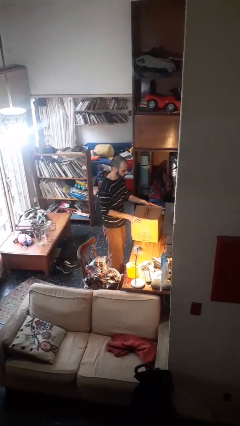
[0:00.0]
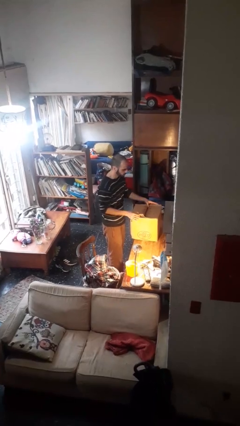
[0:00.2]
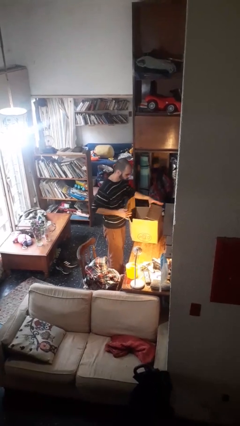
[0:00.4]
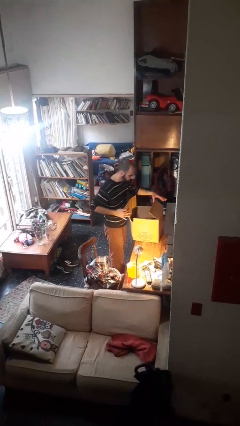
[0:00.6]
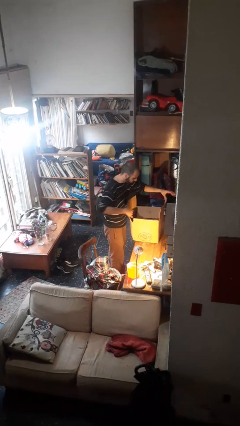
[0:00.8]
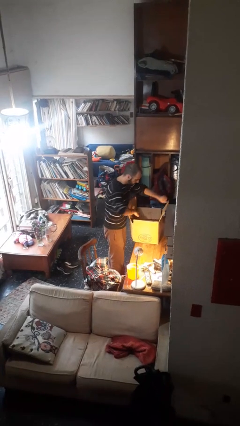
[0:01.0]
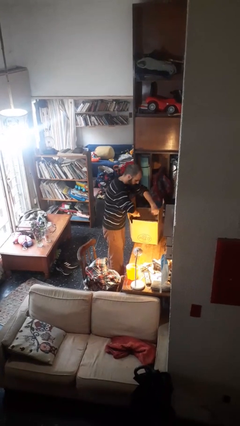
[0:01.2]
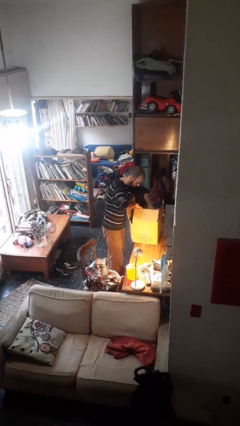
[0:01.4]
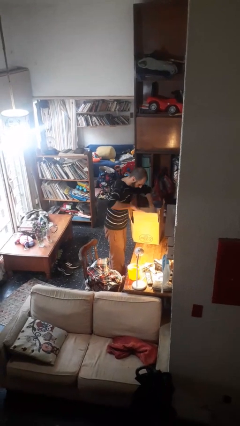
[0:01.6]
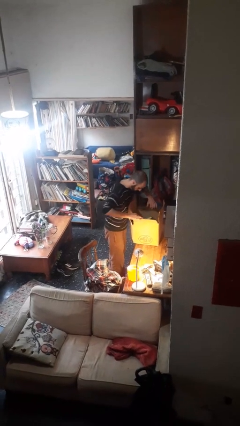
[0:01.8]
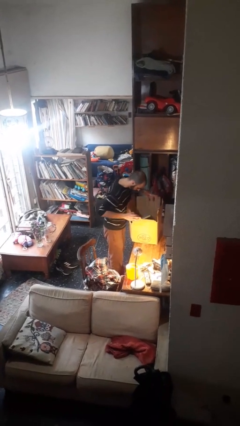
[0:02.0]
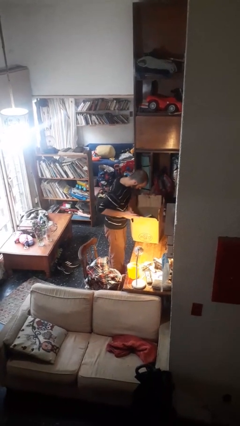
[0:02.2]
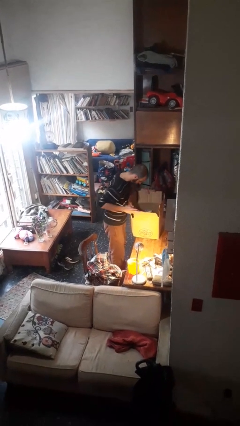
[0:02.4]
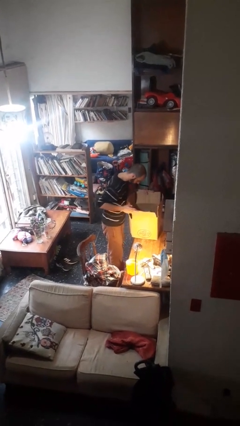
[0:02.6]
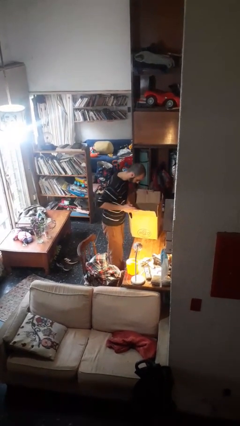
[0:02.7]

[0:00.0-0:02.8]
person opens box

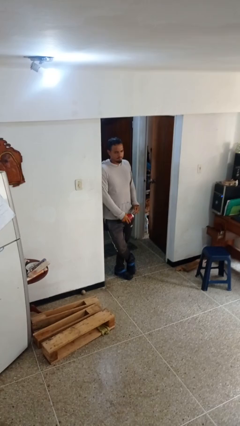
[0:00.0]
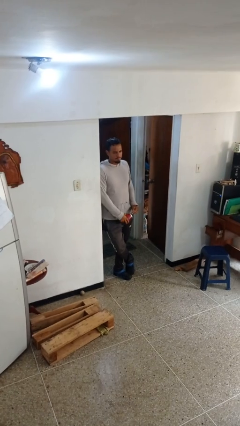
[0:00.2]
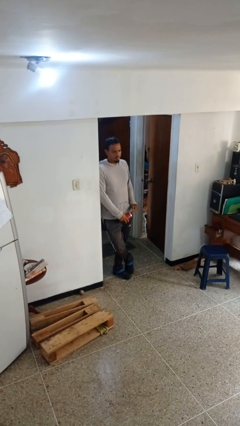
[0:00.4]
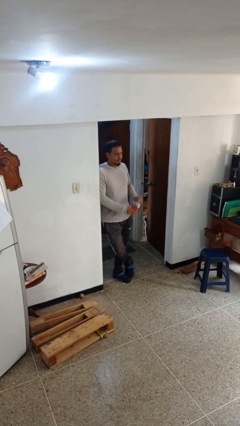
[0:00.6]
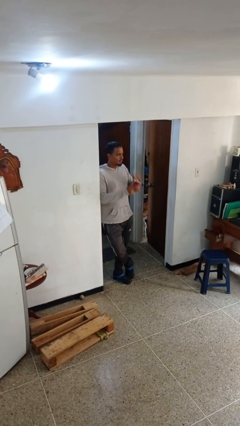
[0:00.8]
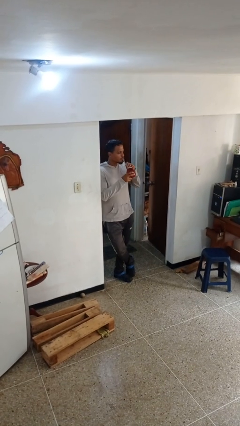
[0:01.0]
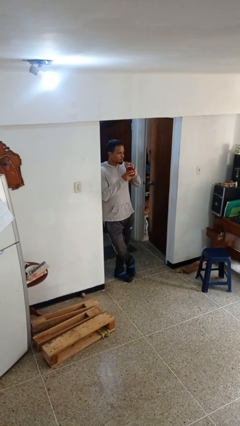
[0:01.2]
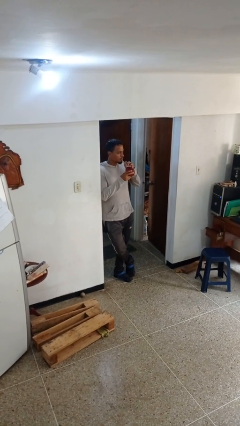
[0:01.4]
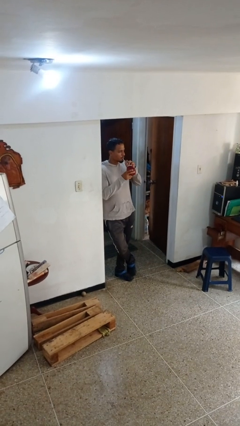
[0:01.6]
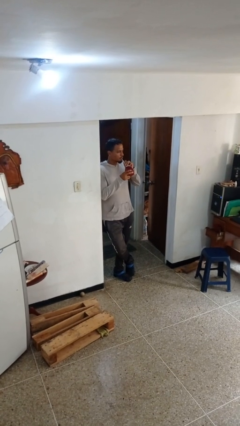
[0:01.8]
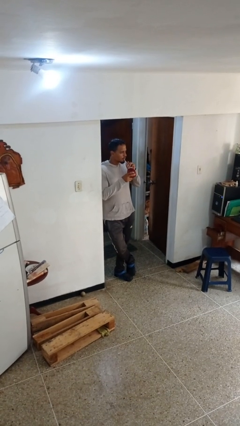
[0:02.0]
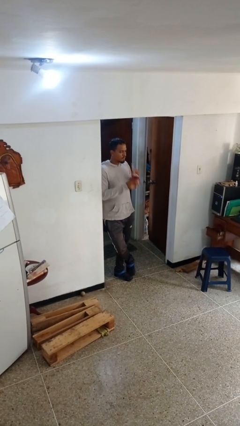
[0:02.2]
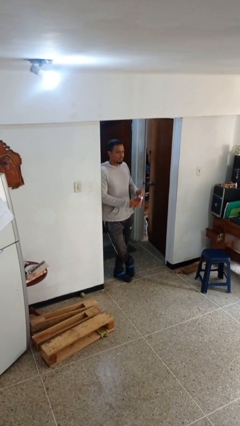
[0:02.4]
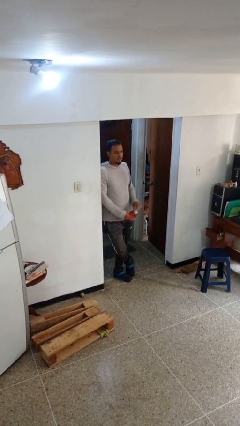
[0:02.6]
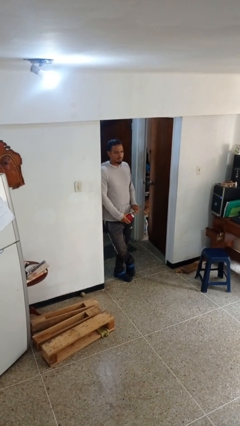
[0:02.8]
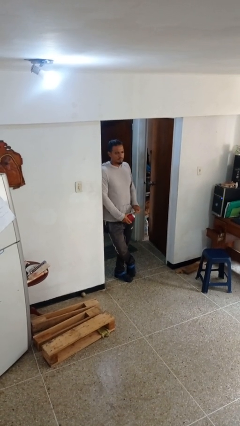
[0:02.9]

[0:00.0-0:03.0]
person drinks from straw

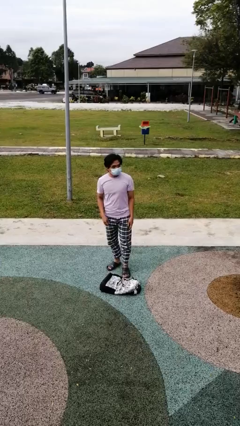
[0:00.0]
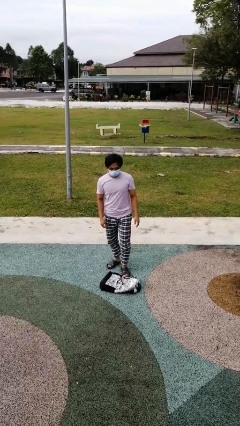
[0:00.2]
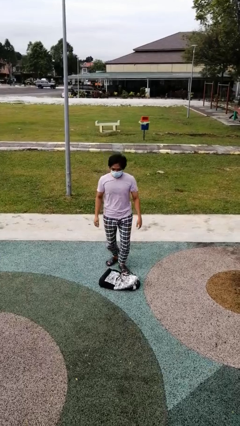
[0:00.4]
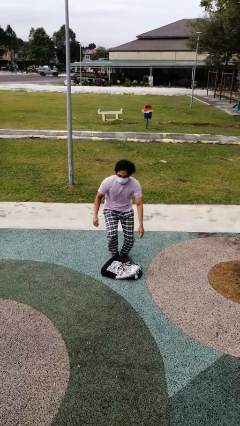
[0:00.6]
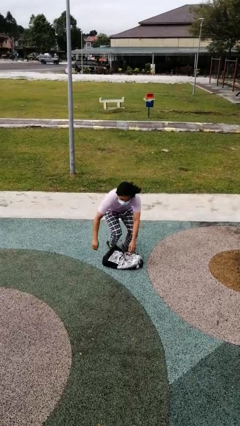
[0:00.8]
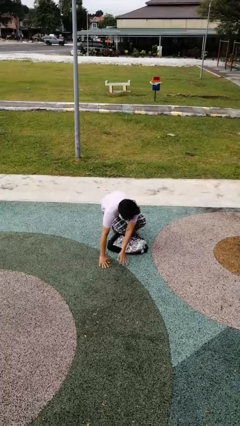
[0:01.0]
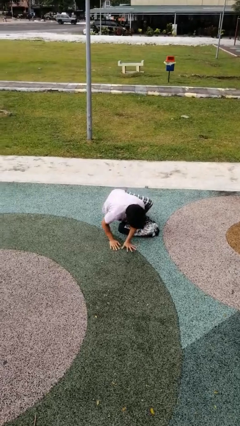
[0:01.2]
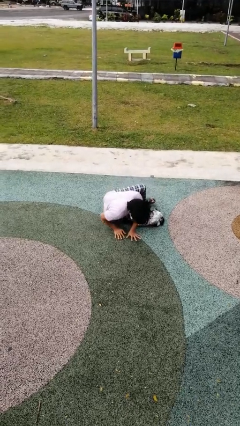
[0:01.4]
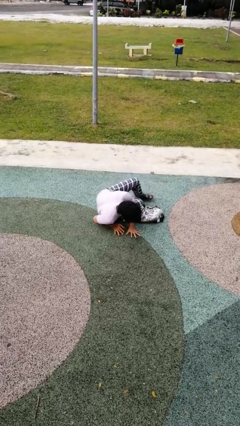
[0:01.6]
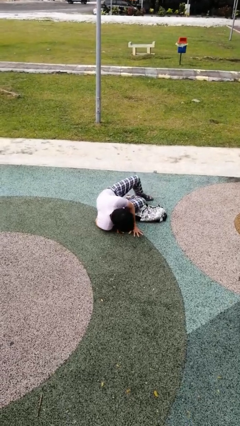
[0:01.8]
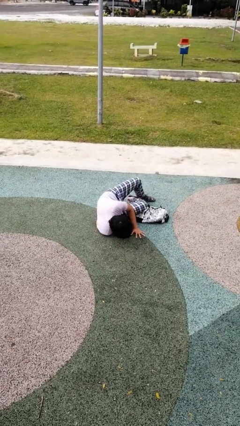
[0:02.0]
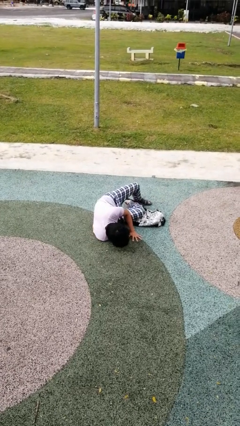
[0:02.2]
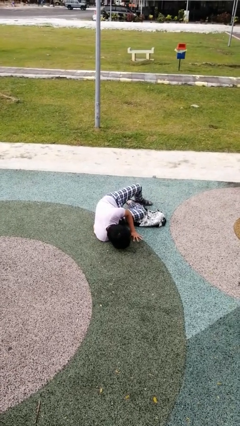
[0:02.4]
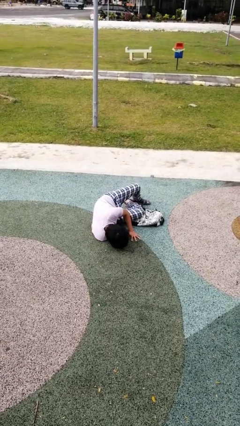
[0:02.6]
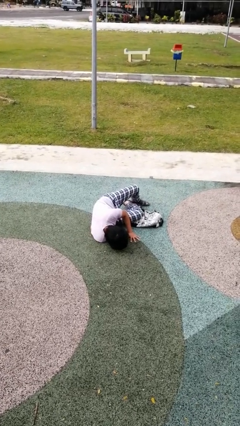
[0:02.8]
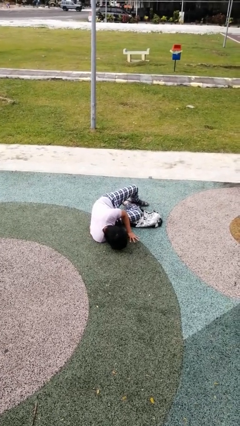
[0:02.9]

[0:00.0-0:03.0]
person trips on object on floor

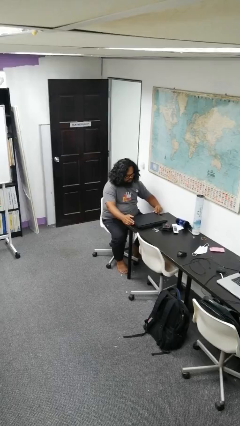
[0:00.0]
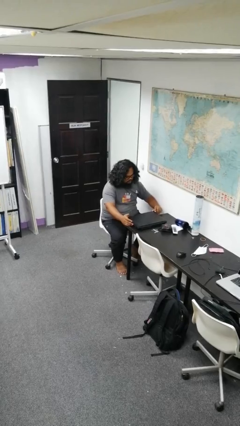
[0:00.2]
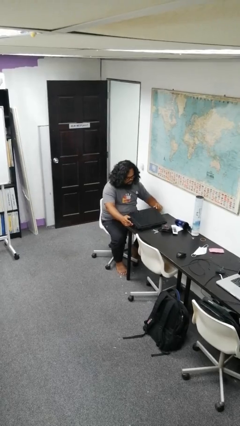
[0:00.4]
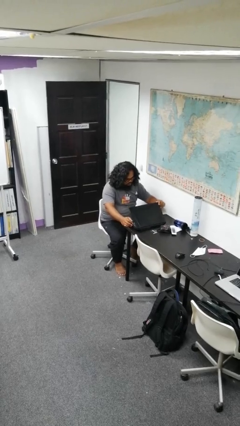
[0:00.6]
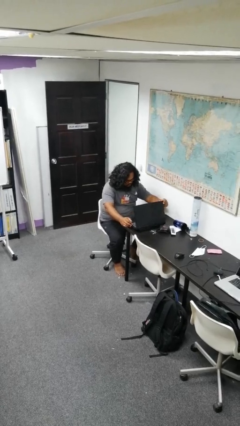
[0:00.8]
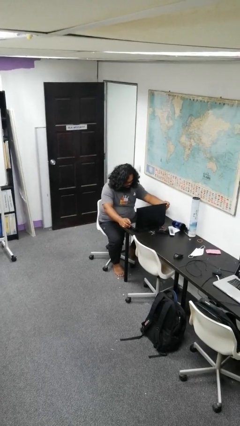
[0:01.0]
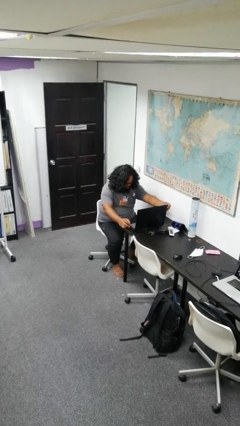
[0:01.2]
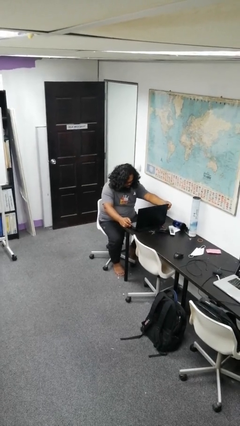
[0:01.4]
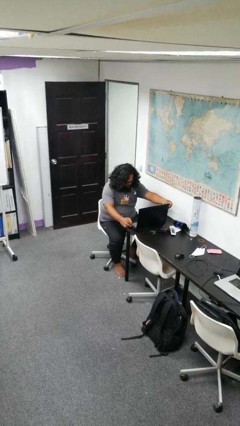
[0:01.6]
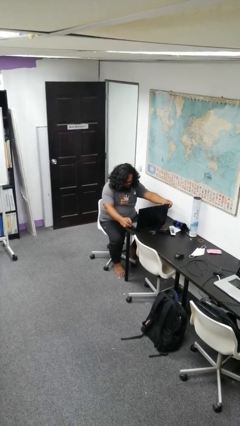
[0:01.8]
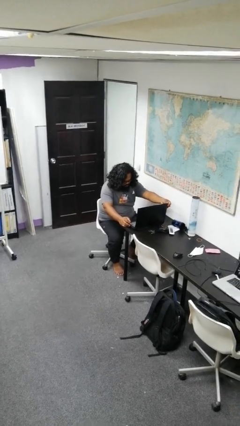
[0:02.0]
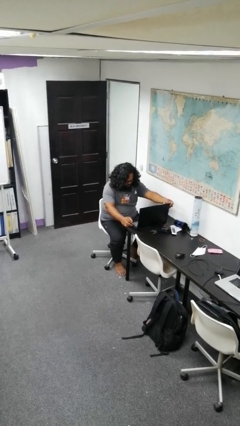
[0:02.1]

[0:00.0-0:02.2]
person opens laptop

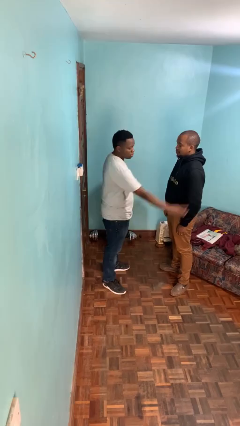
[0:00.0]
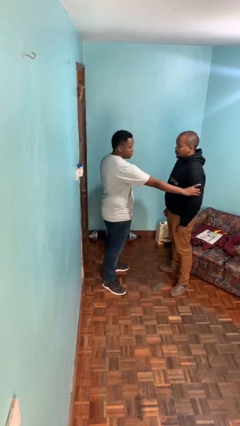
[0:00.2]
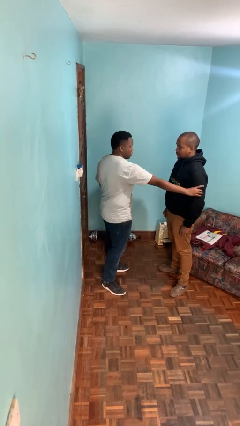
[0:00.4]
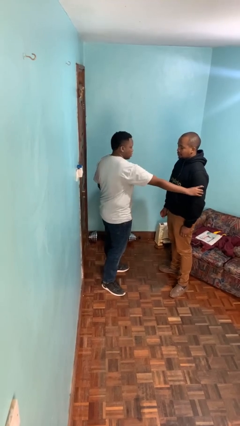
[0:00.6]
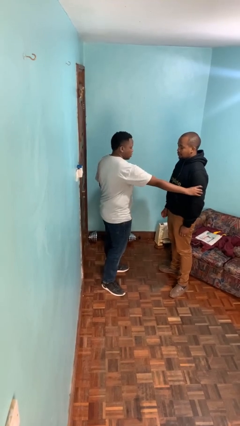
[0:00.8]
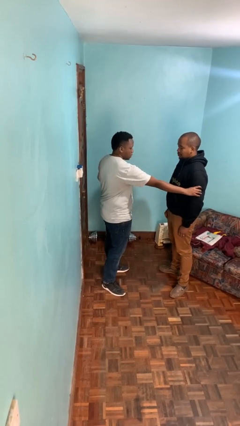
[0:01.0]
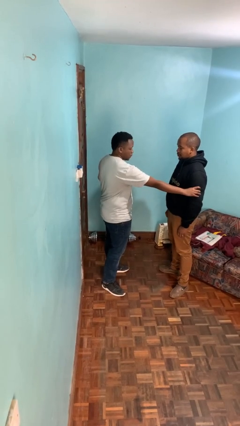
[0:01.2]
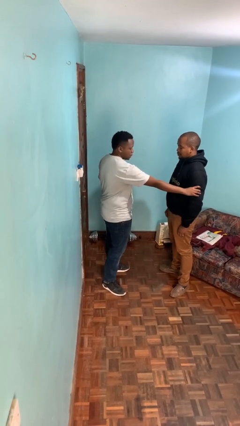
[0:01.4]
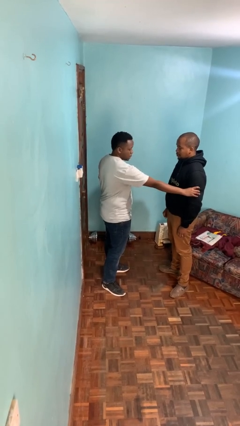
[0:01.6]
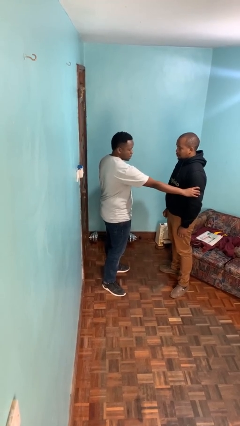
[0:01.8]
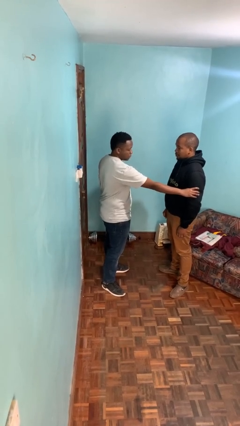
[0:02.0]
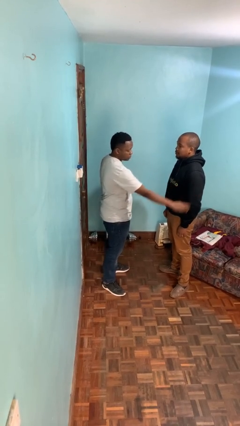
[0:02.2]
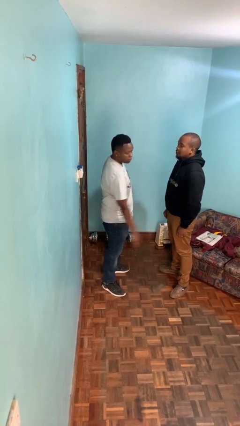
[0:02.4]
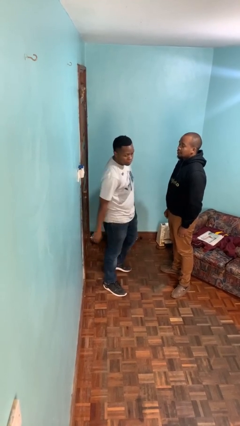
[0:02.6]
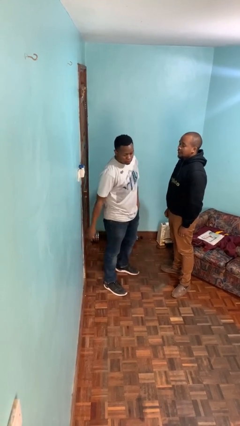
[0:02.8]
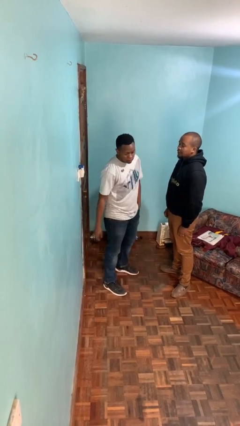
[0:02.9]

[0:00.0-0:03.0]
person grabs person by bicep

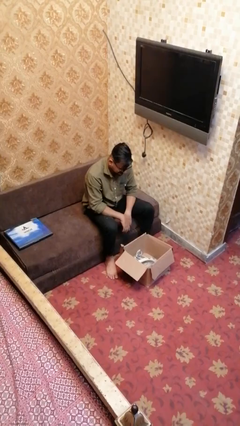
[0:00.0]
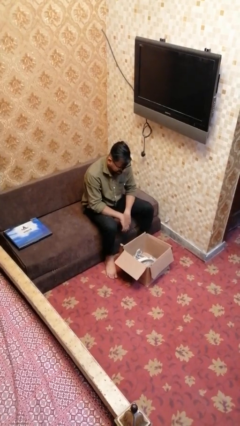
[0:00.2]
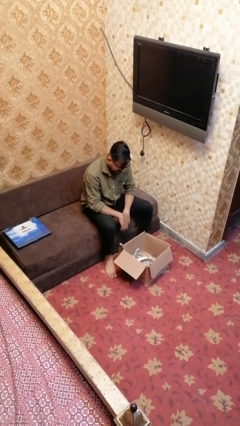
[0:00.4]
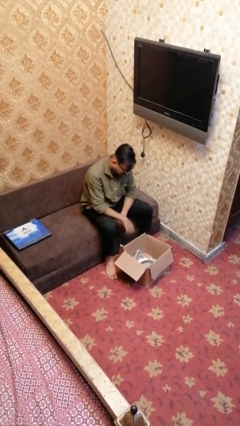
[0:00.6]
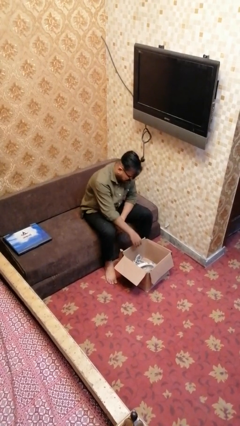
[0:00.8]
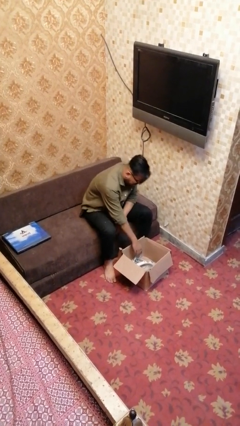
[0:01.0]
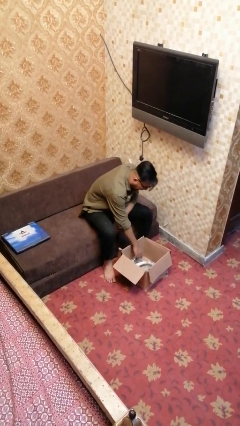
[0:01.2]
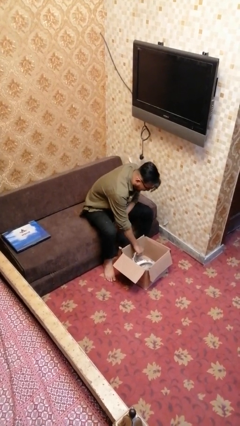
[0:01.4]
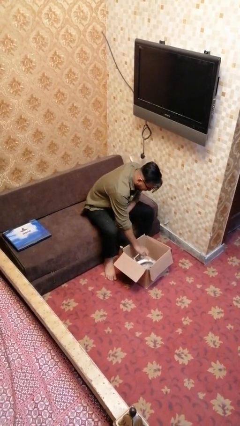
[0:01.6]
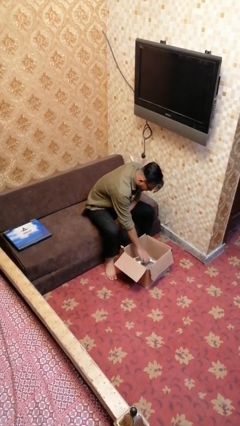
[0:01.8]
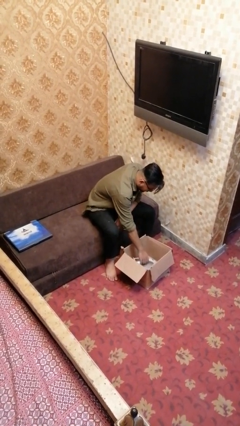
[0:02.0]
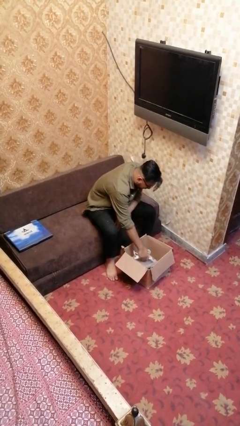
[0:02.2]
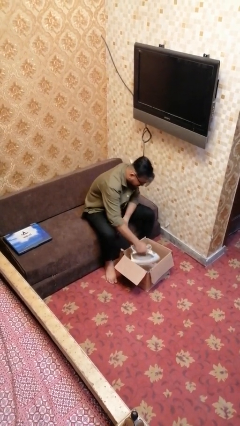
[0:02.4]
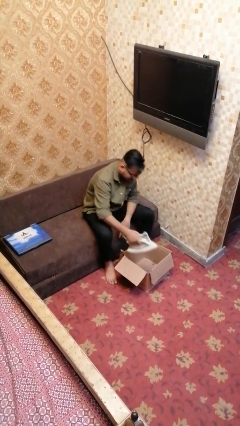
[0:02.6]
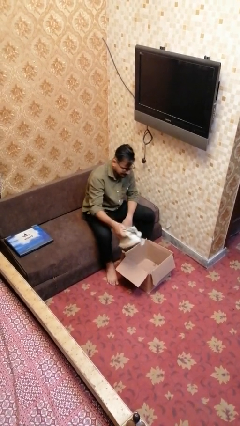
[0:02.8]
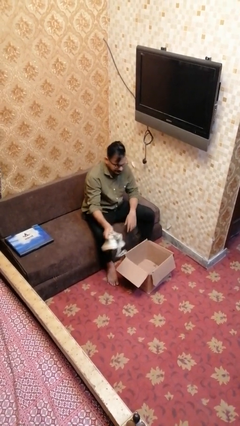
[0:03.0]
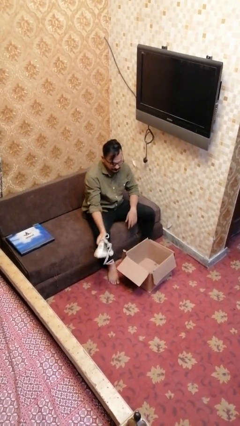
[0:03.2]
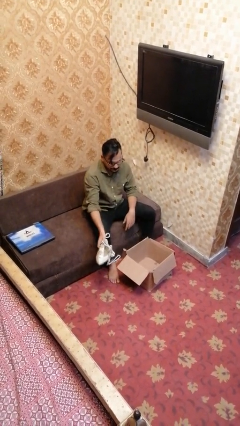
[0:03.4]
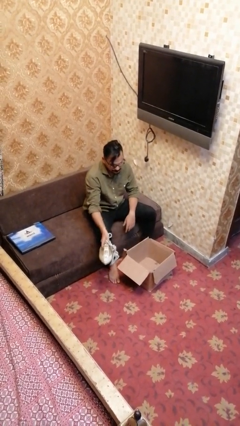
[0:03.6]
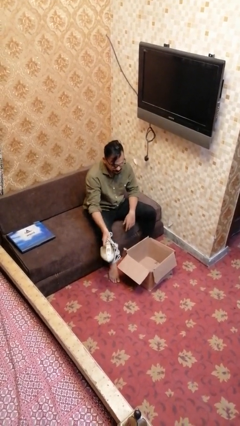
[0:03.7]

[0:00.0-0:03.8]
person takes object from box
